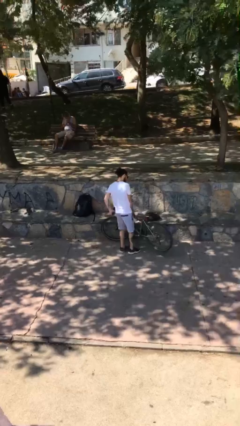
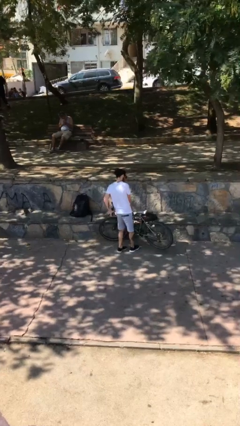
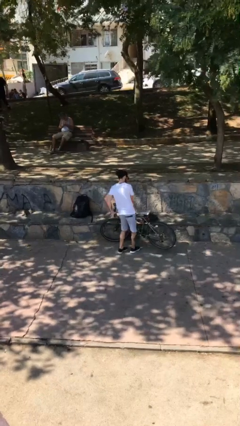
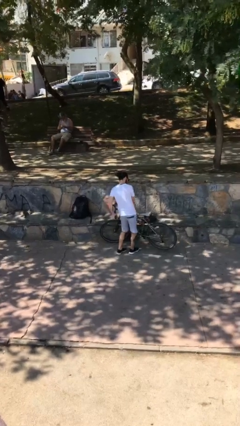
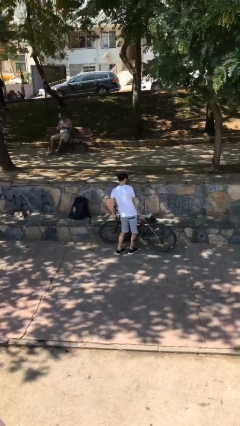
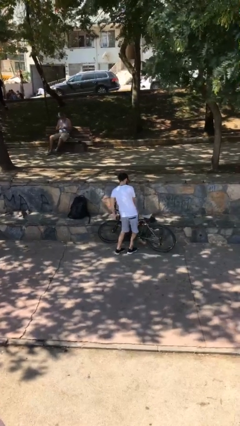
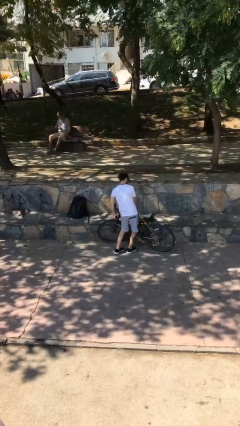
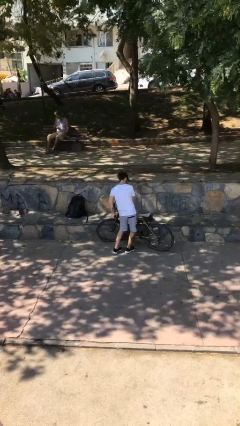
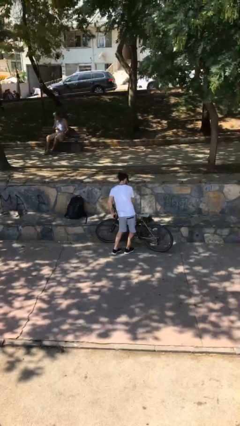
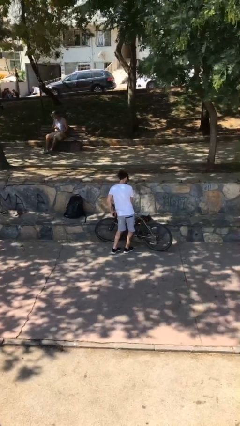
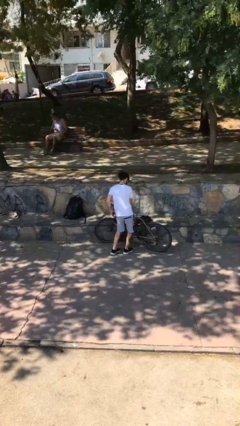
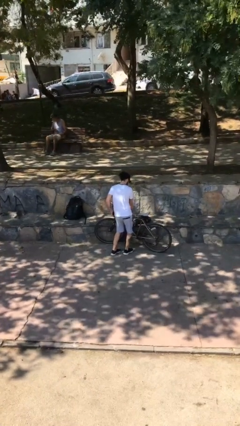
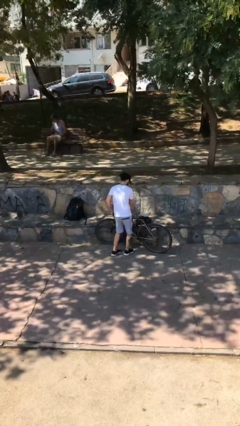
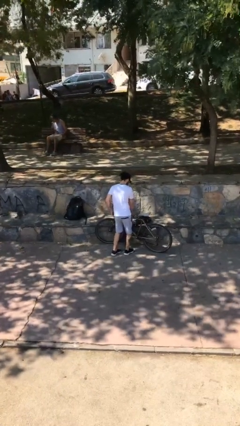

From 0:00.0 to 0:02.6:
person puts down object on floor

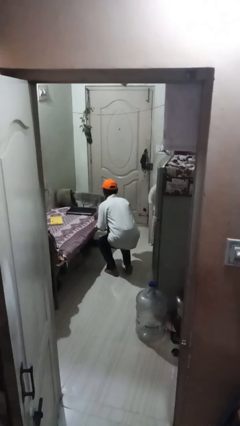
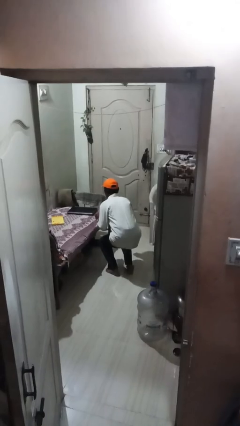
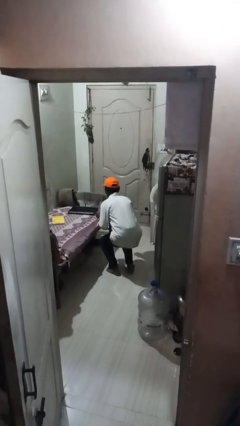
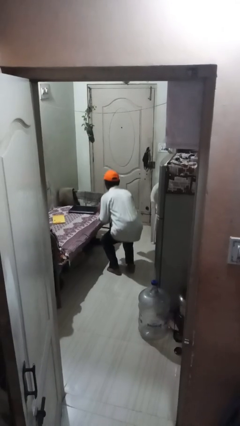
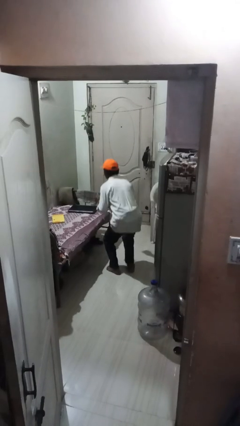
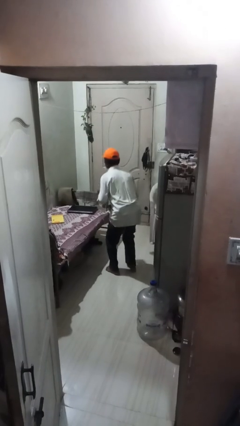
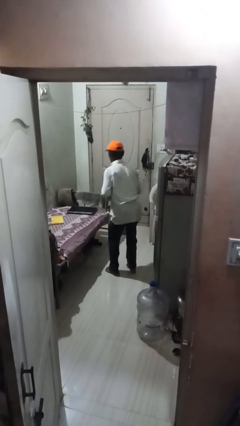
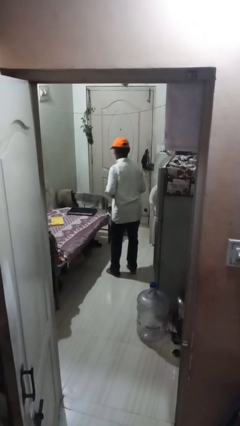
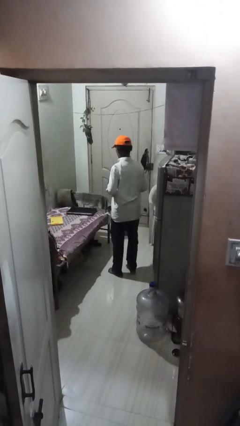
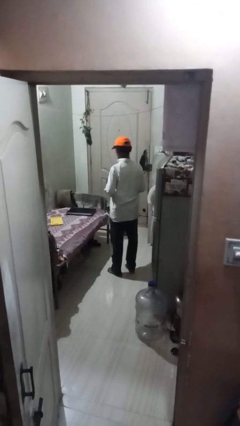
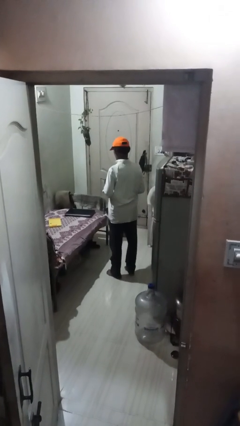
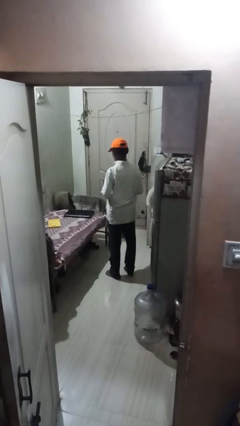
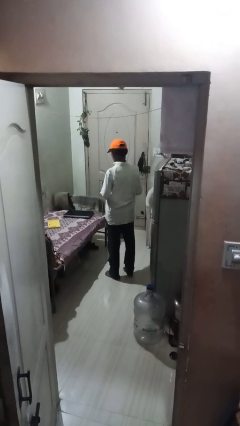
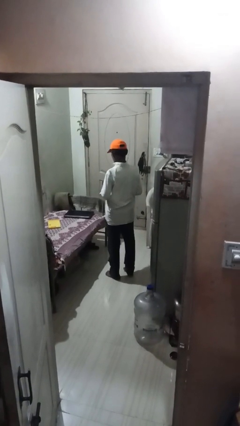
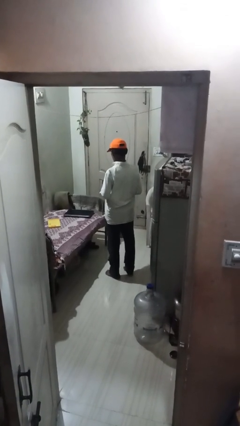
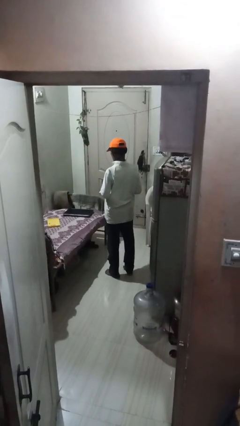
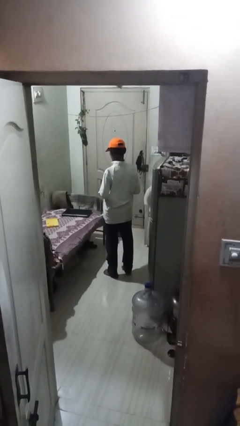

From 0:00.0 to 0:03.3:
person stands up

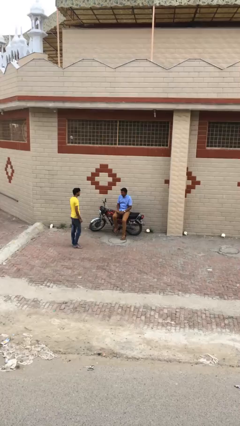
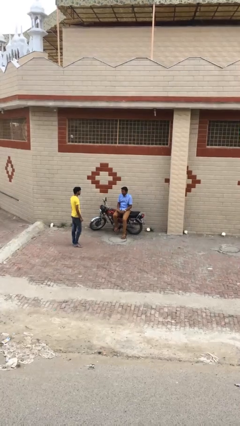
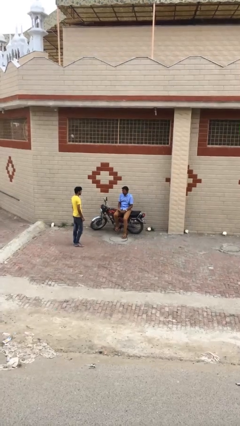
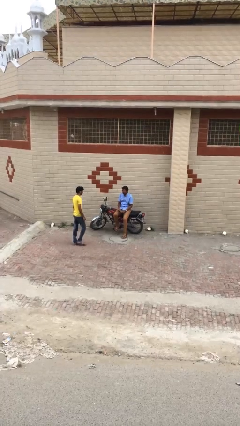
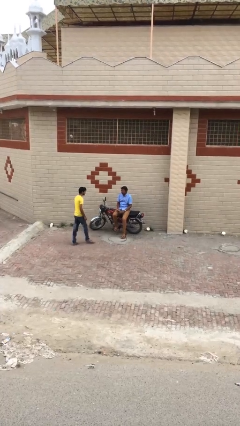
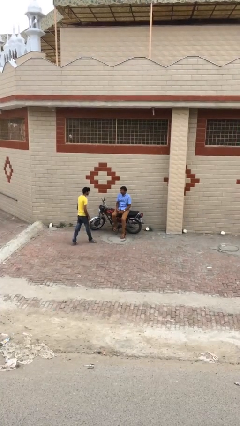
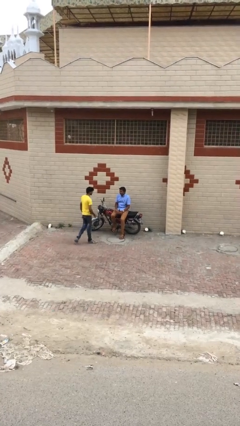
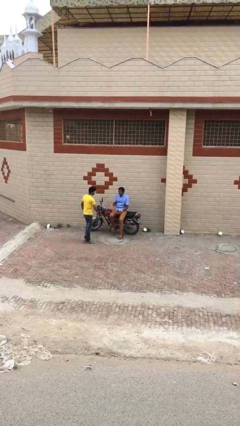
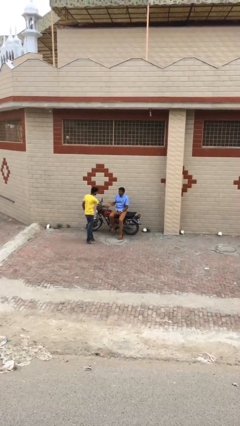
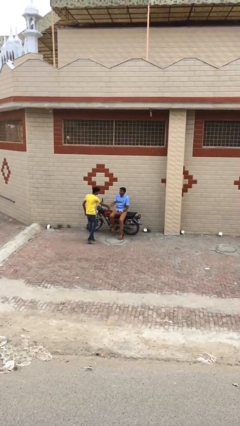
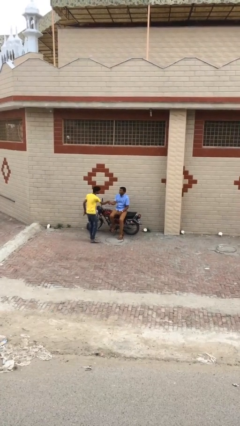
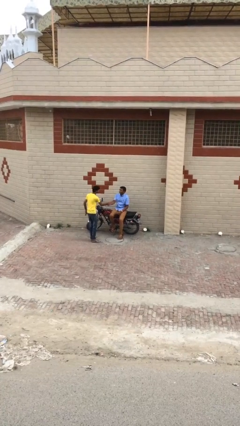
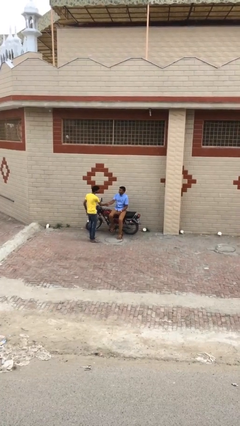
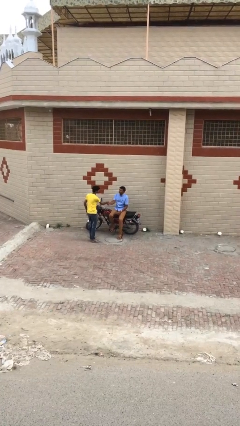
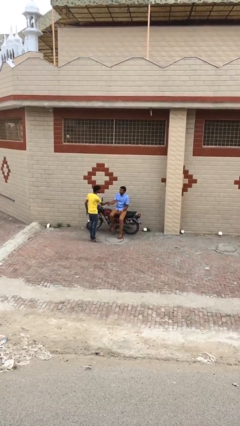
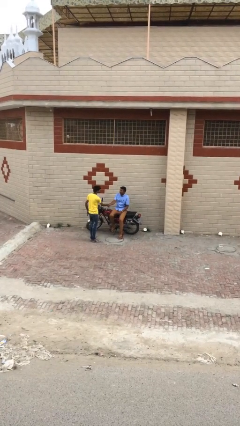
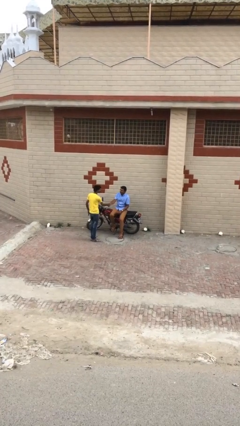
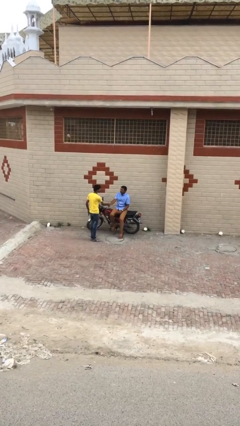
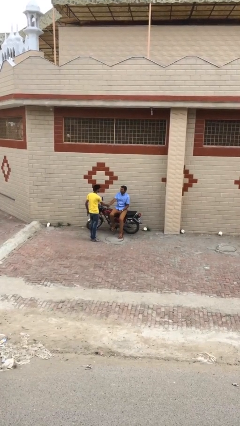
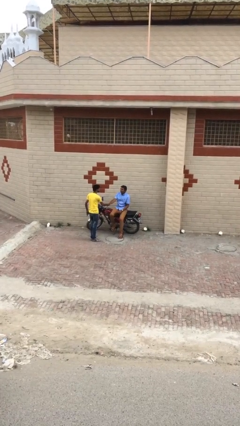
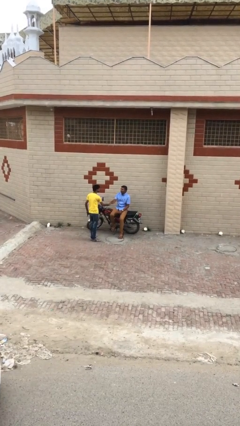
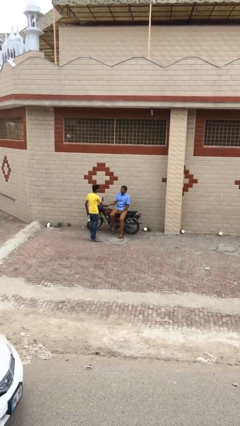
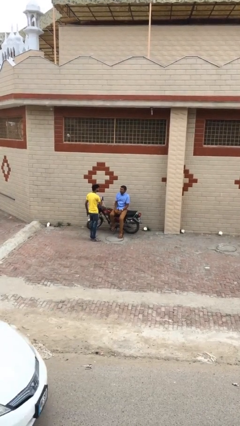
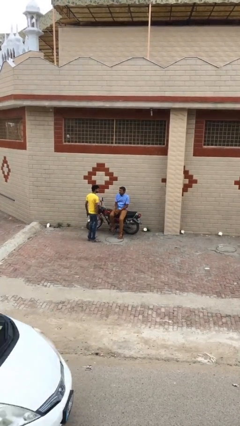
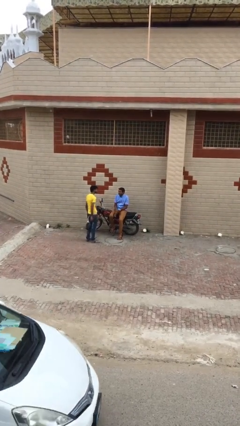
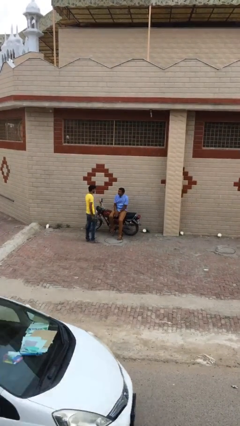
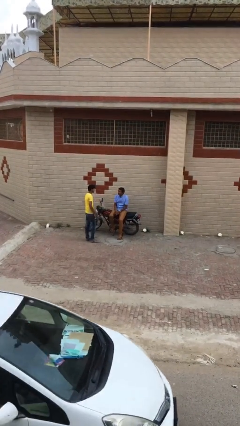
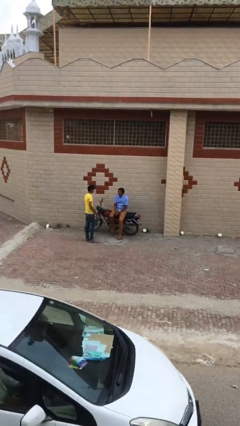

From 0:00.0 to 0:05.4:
person shakes hand

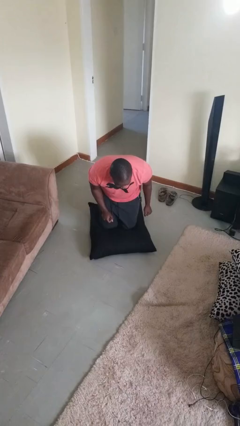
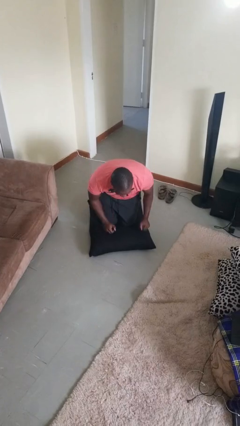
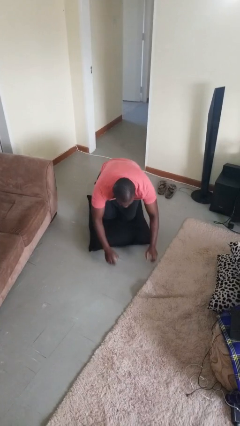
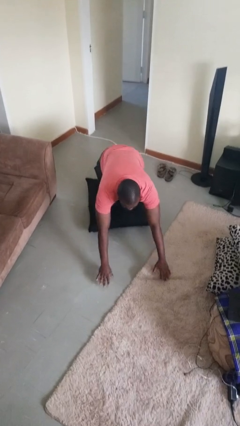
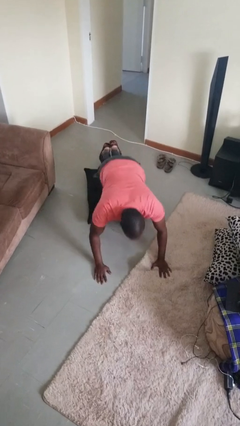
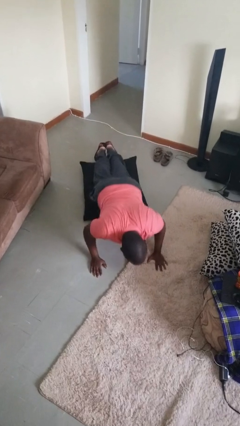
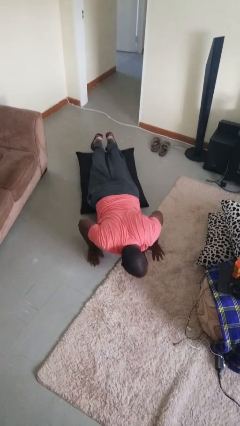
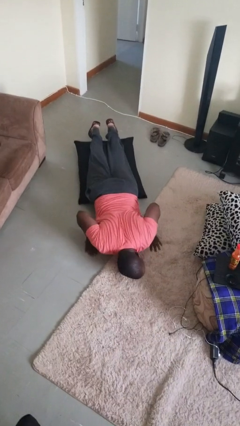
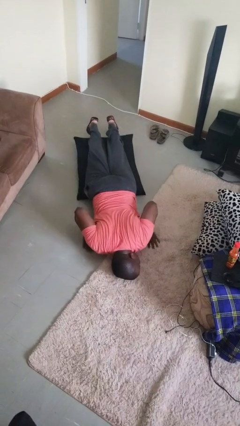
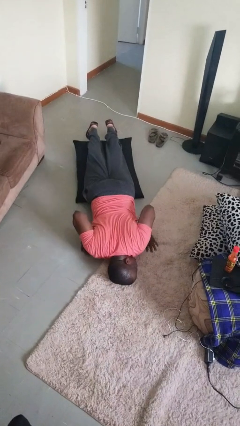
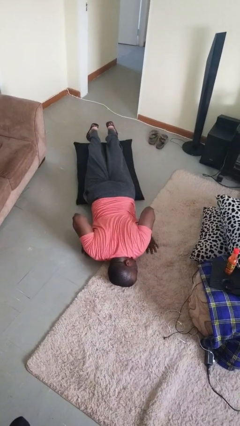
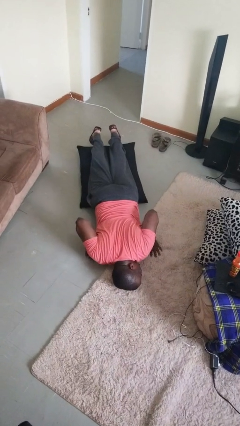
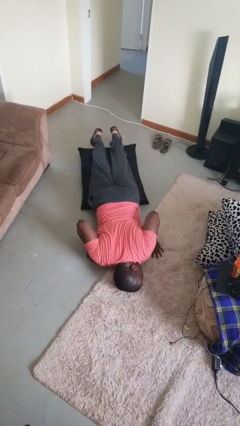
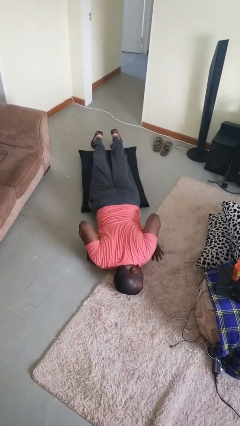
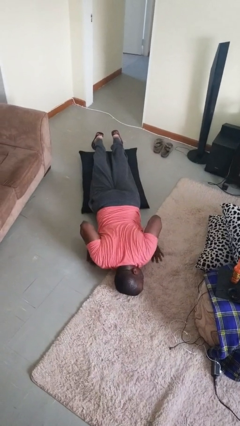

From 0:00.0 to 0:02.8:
person lies down on floor

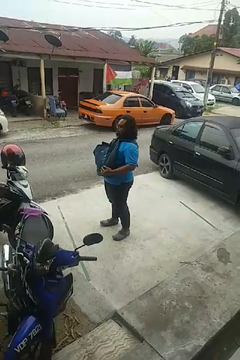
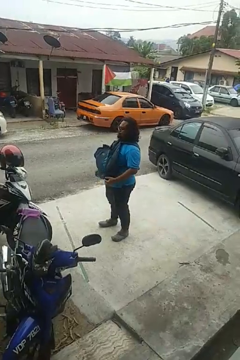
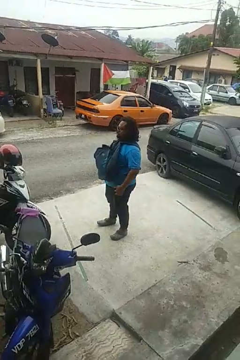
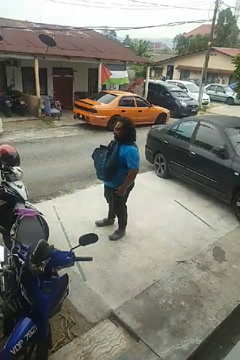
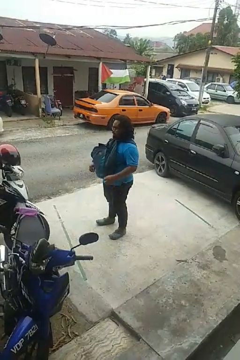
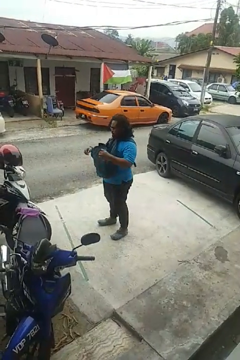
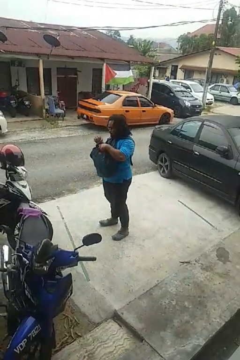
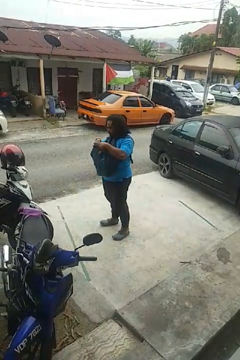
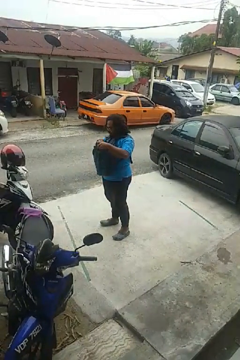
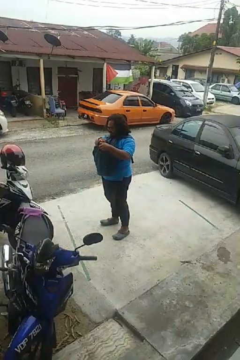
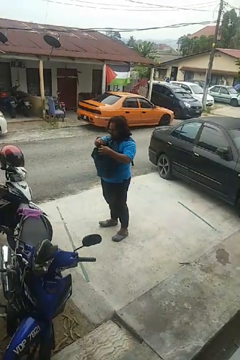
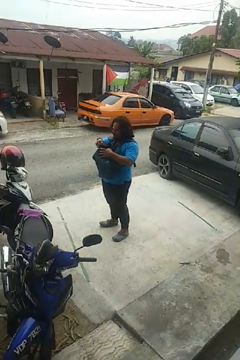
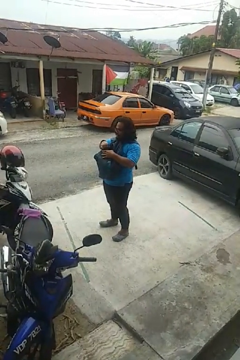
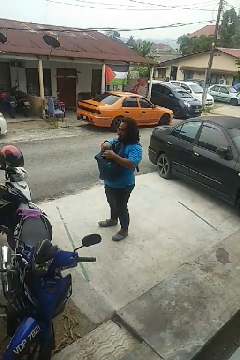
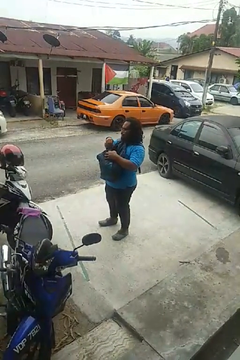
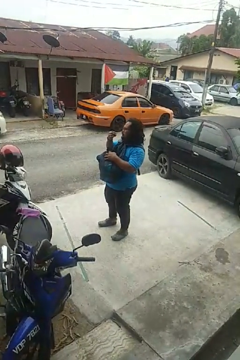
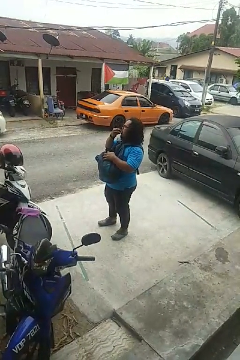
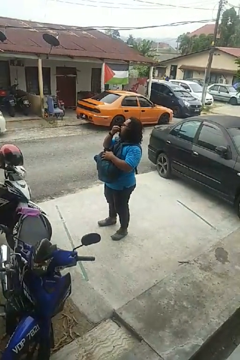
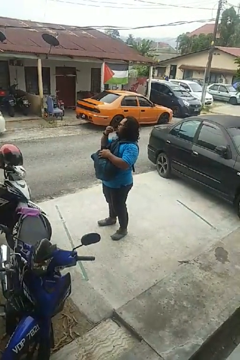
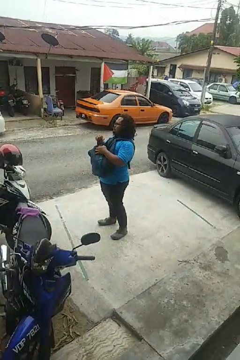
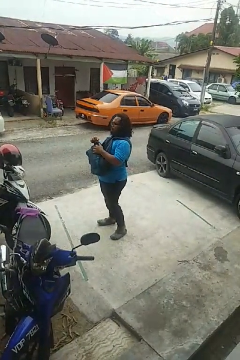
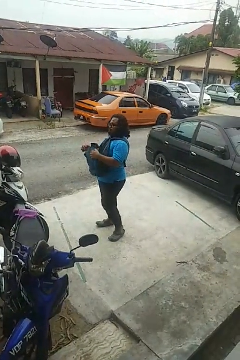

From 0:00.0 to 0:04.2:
person eats snack from bag
